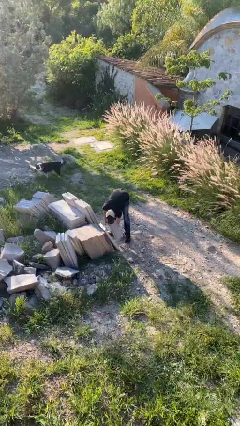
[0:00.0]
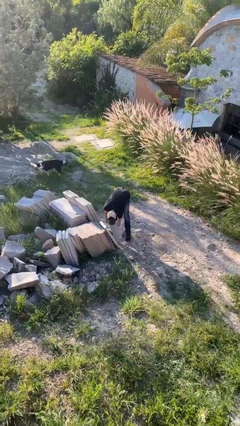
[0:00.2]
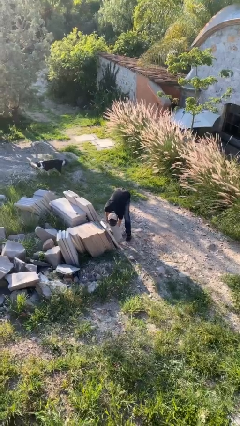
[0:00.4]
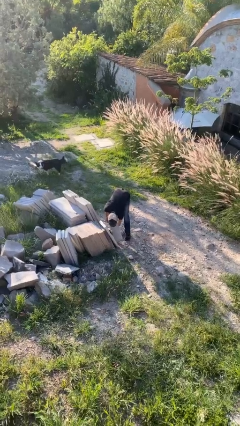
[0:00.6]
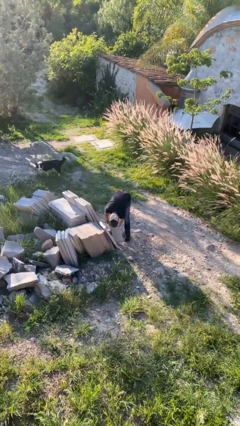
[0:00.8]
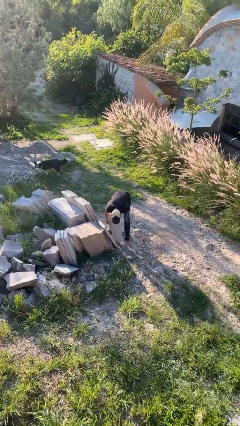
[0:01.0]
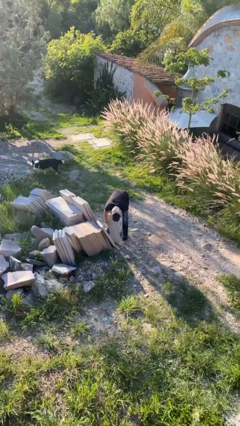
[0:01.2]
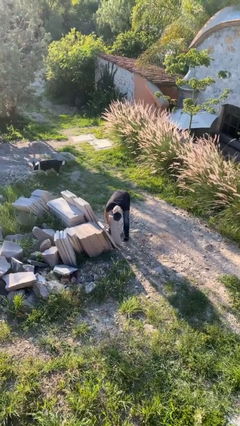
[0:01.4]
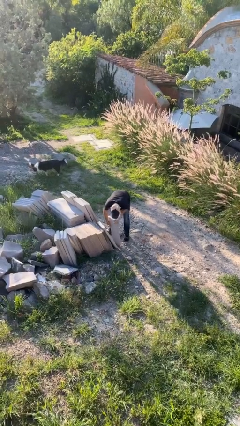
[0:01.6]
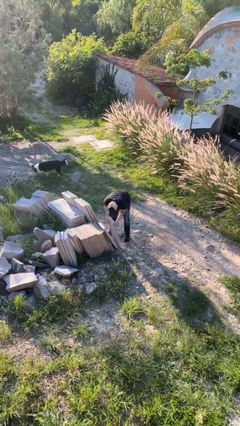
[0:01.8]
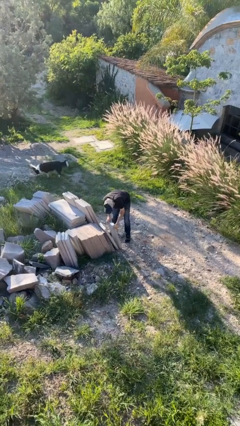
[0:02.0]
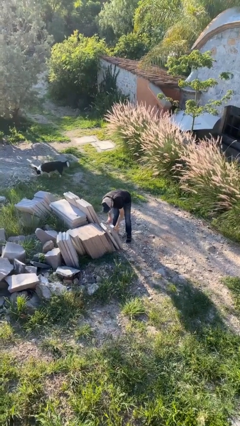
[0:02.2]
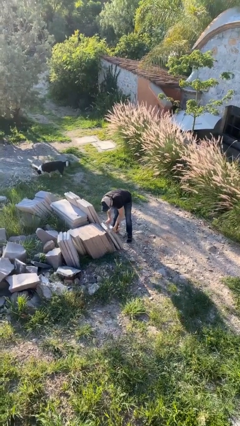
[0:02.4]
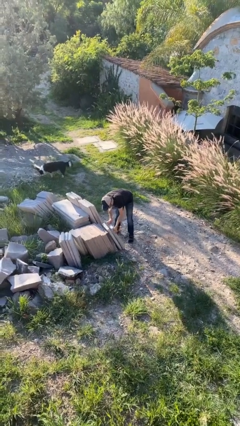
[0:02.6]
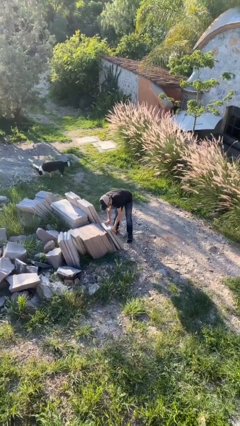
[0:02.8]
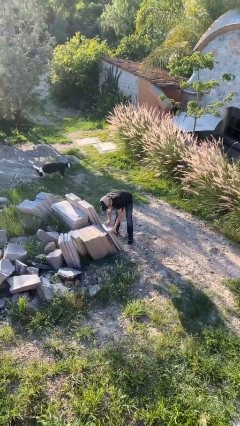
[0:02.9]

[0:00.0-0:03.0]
person puts down object on floor

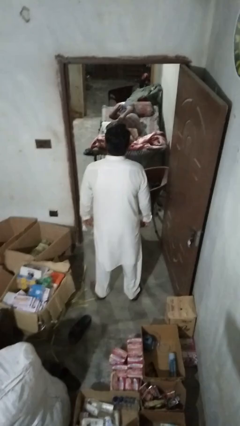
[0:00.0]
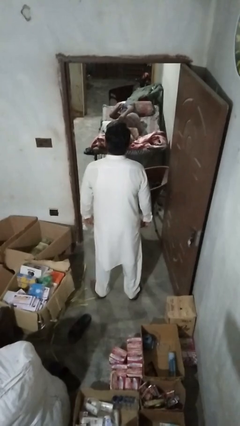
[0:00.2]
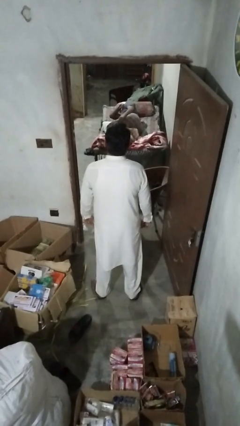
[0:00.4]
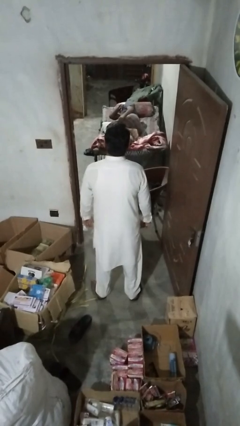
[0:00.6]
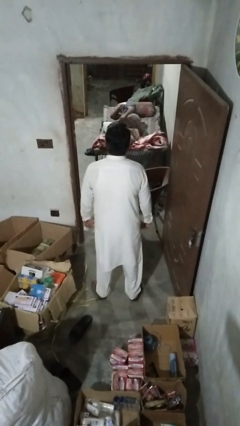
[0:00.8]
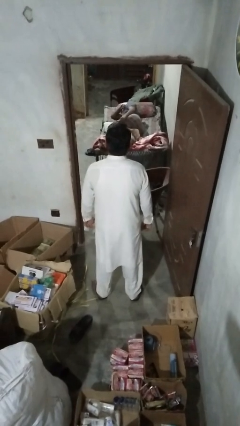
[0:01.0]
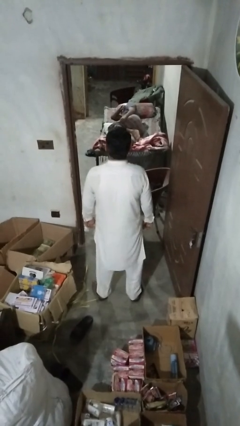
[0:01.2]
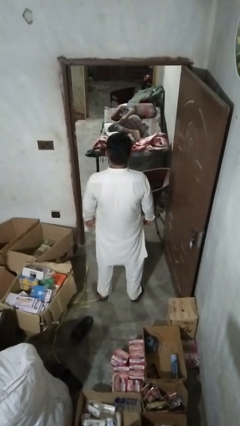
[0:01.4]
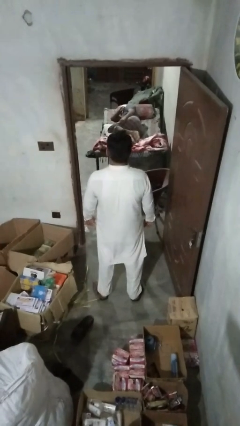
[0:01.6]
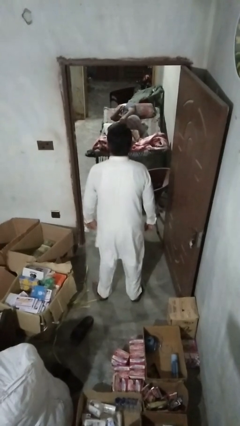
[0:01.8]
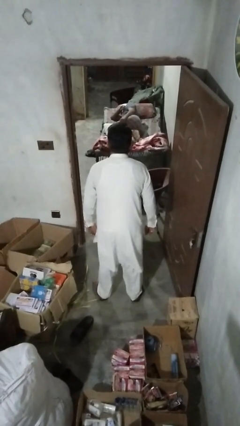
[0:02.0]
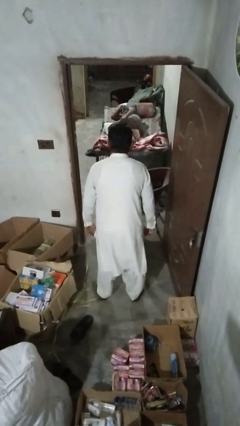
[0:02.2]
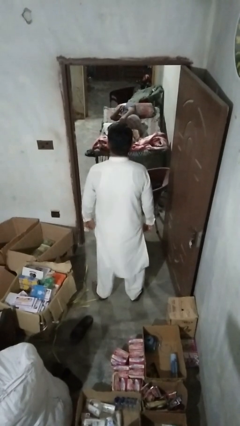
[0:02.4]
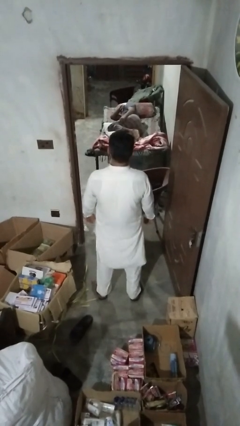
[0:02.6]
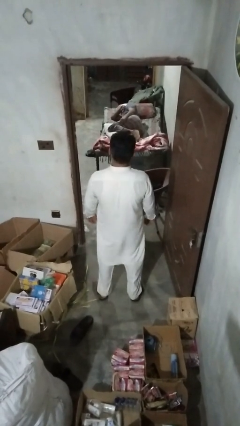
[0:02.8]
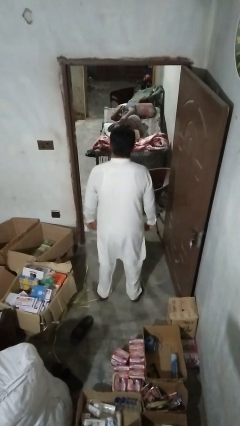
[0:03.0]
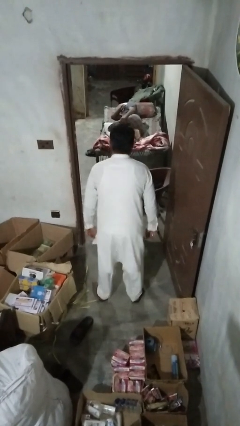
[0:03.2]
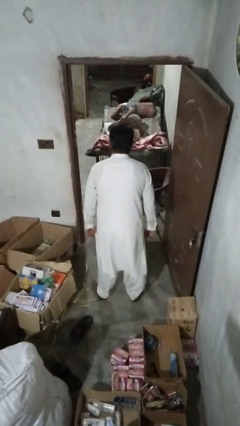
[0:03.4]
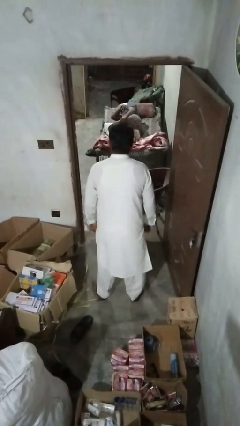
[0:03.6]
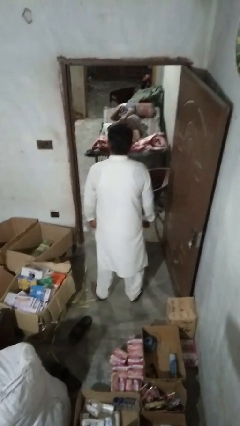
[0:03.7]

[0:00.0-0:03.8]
person wiggles hips

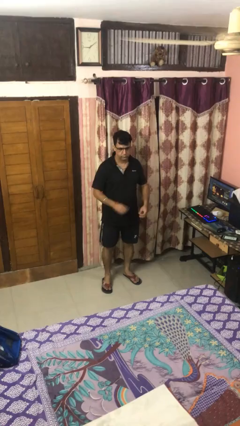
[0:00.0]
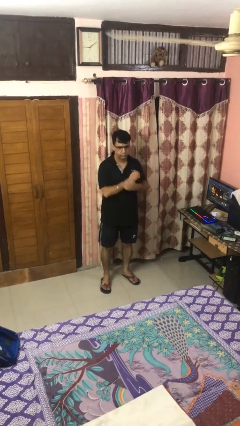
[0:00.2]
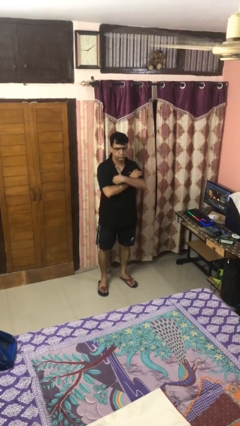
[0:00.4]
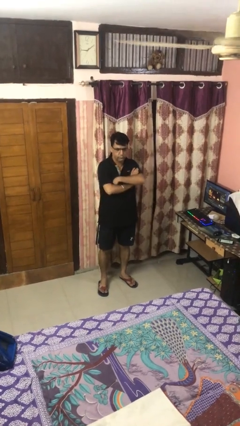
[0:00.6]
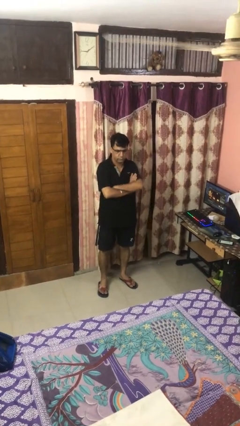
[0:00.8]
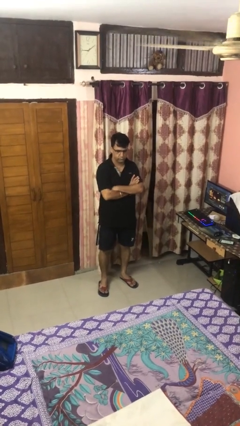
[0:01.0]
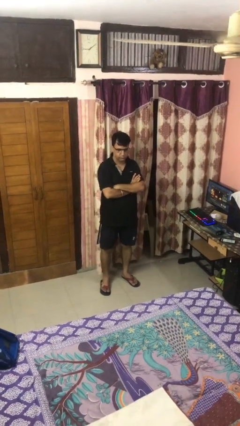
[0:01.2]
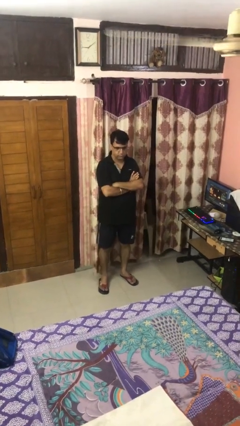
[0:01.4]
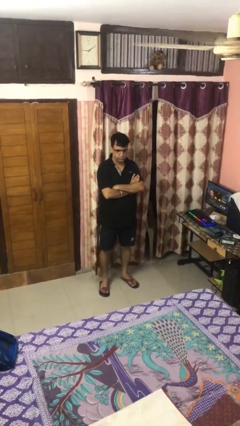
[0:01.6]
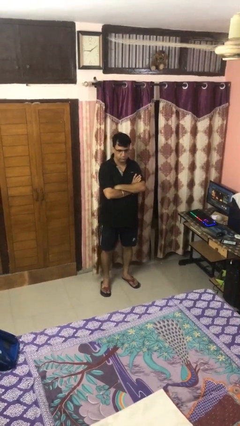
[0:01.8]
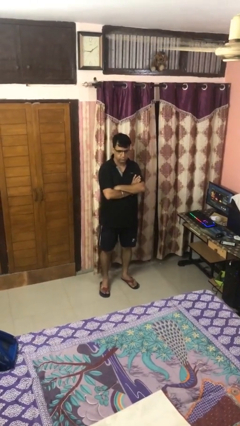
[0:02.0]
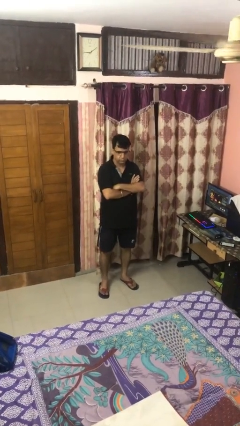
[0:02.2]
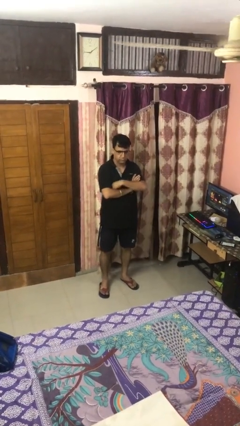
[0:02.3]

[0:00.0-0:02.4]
person crosses arms

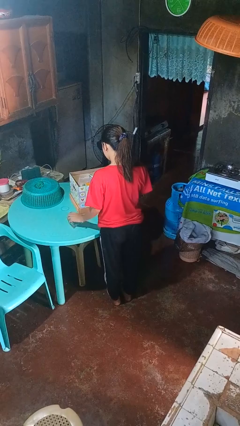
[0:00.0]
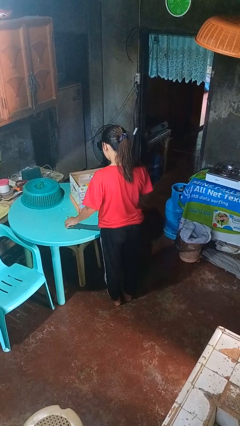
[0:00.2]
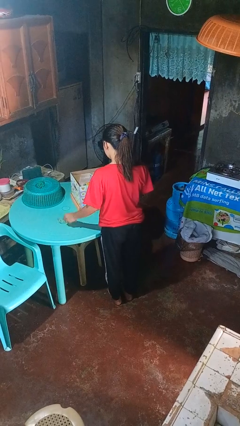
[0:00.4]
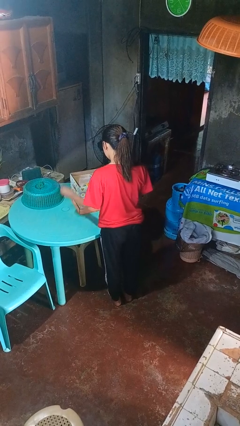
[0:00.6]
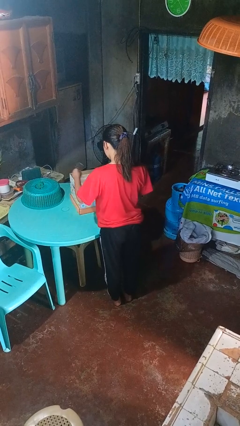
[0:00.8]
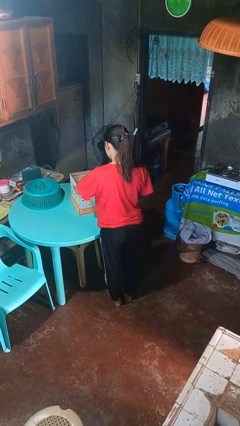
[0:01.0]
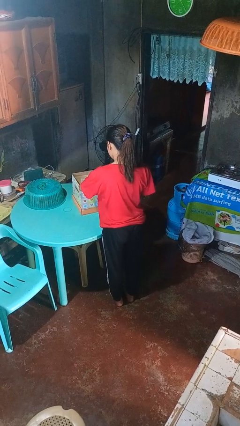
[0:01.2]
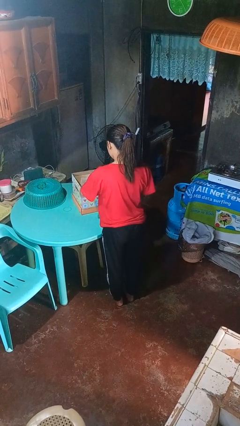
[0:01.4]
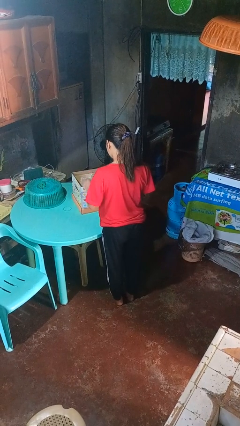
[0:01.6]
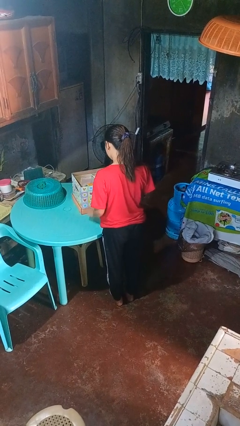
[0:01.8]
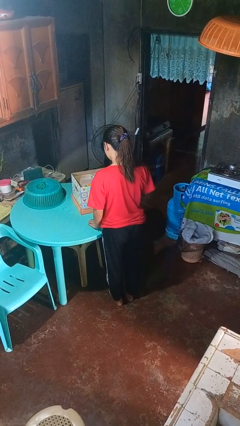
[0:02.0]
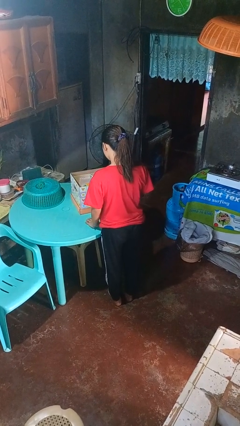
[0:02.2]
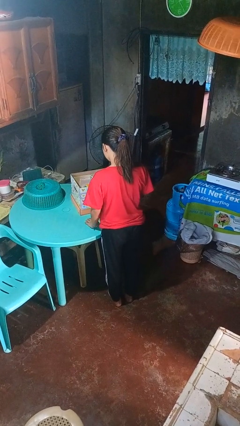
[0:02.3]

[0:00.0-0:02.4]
person puts object into box

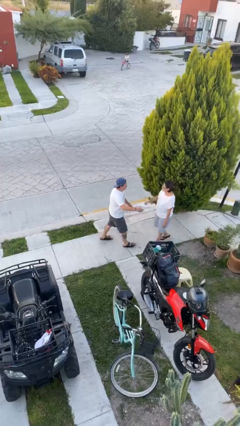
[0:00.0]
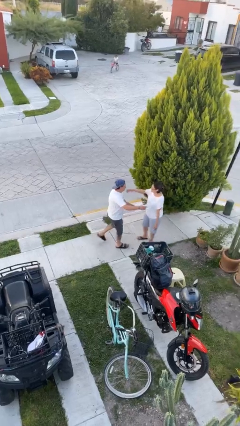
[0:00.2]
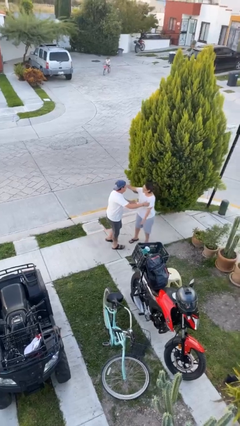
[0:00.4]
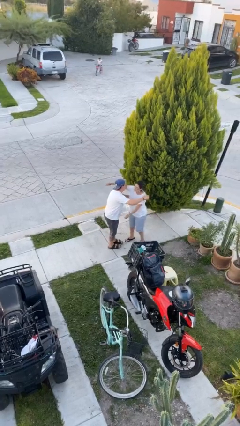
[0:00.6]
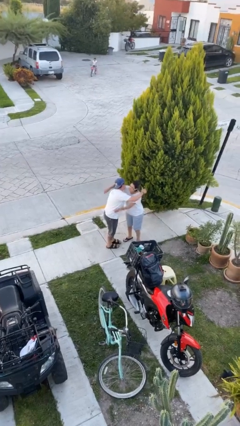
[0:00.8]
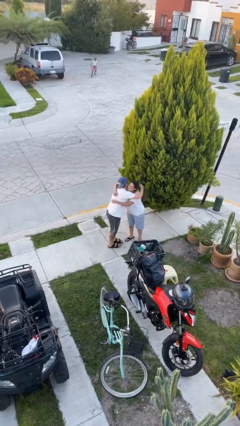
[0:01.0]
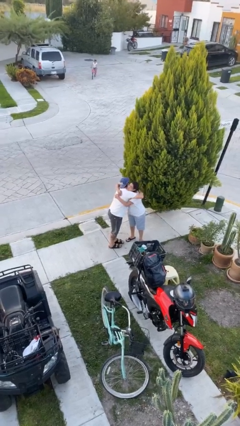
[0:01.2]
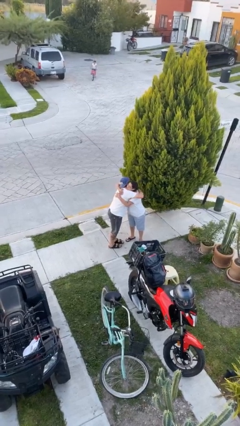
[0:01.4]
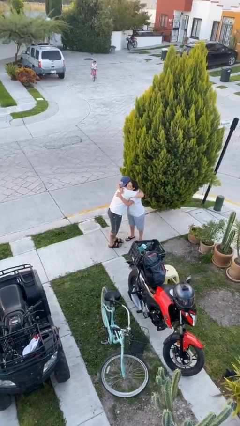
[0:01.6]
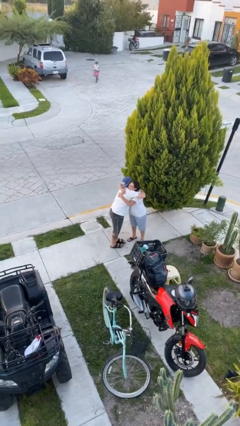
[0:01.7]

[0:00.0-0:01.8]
person embraces person

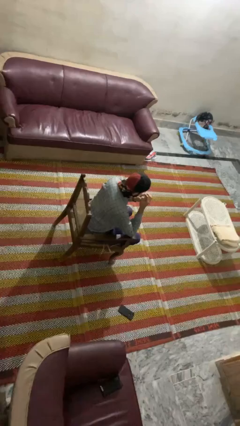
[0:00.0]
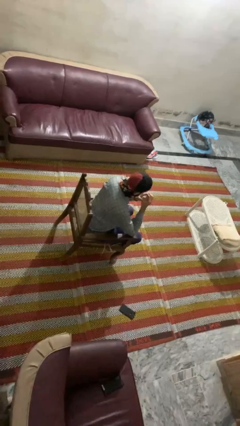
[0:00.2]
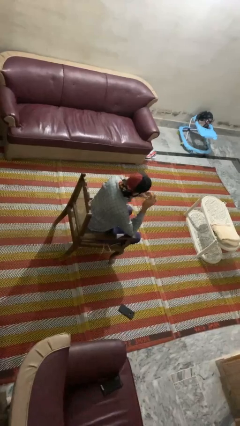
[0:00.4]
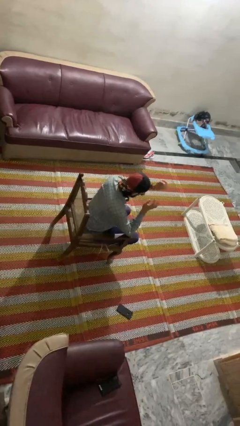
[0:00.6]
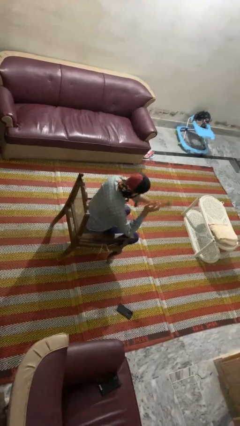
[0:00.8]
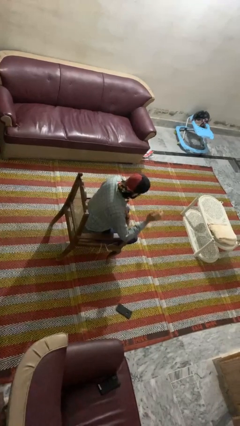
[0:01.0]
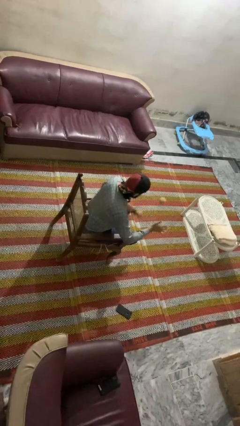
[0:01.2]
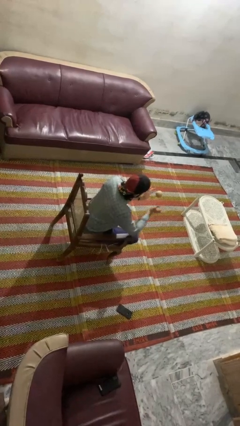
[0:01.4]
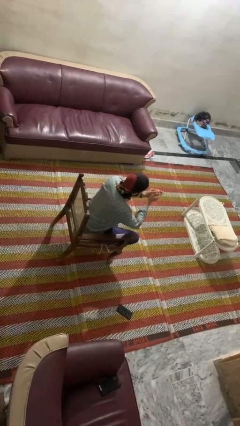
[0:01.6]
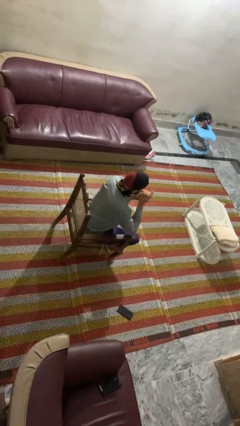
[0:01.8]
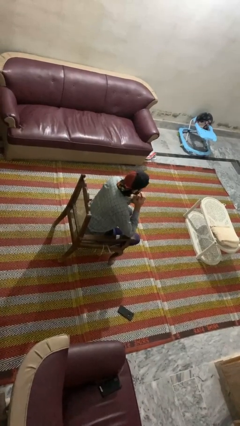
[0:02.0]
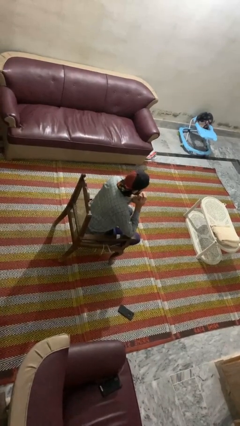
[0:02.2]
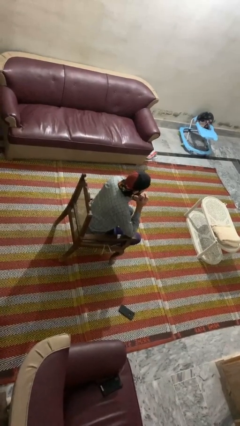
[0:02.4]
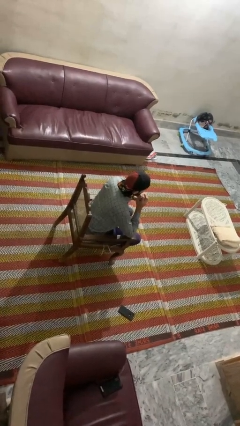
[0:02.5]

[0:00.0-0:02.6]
person bounces ball on floor

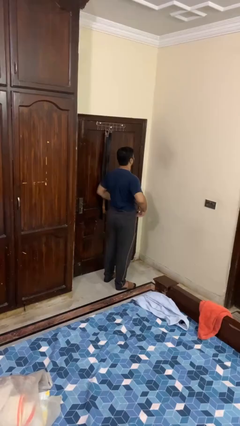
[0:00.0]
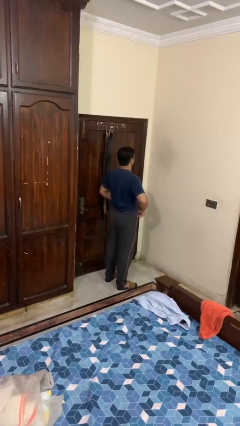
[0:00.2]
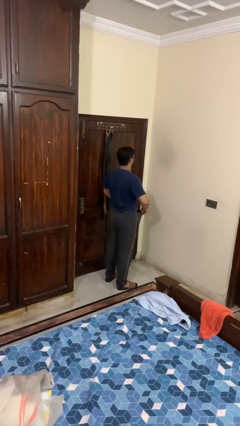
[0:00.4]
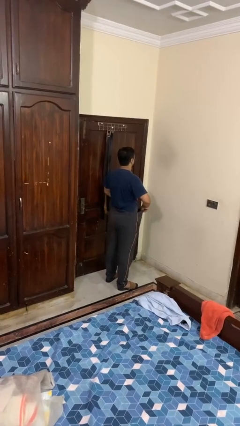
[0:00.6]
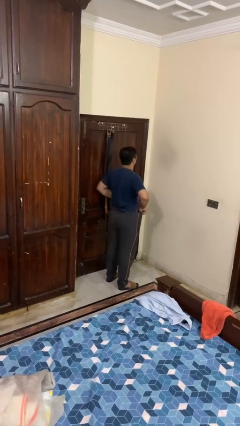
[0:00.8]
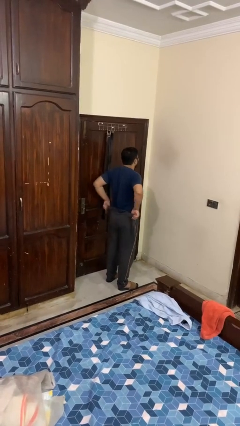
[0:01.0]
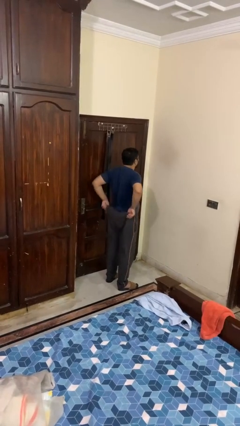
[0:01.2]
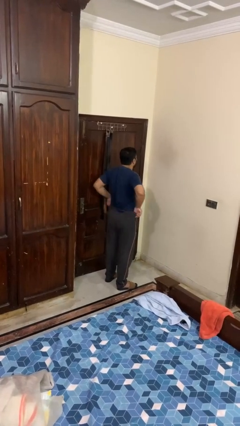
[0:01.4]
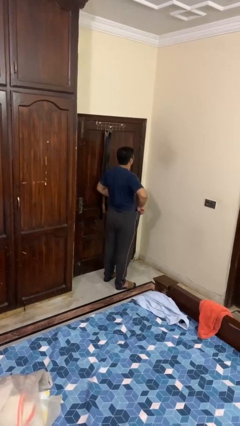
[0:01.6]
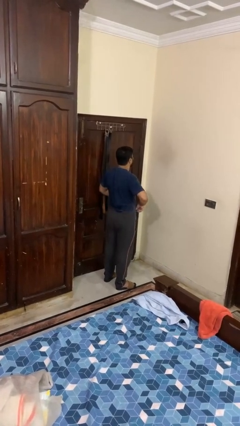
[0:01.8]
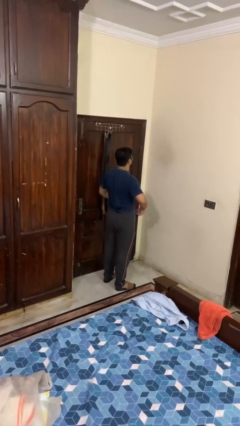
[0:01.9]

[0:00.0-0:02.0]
person hikes up pants
